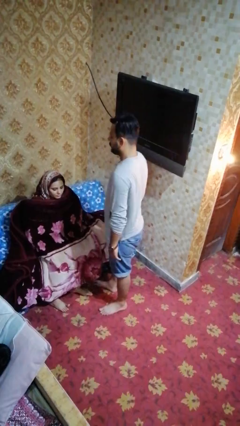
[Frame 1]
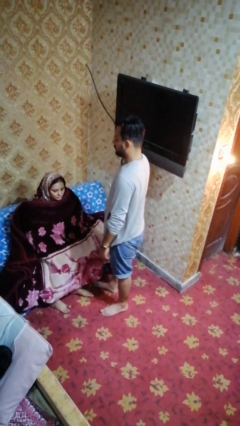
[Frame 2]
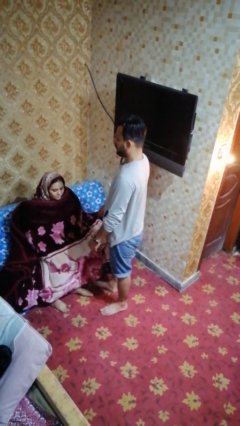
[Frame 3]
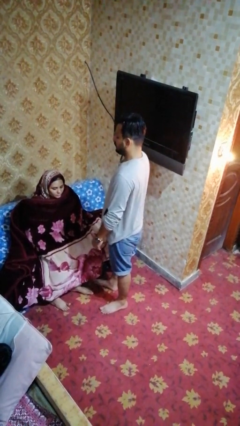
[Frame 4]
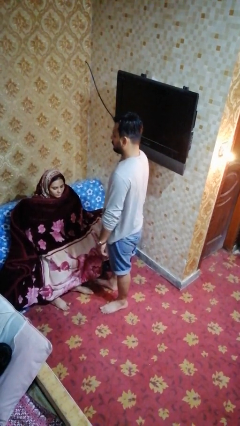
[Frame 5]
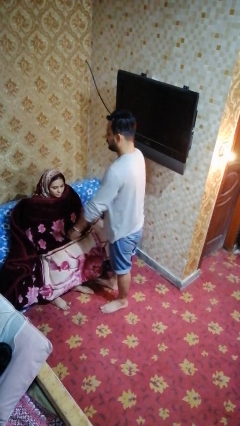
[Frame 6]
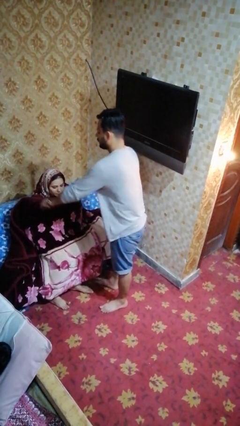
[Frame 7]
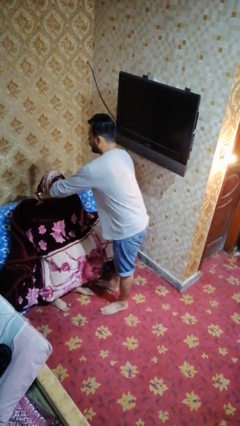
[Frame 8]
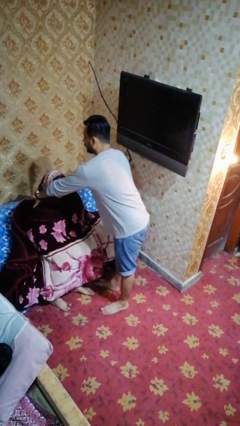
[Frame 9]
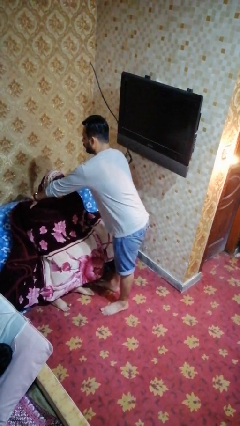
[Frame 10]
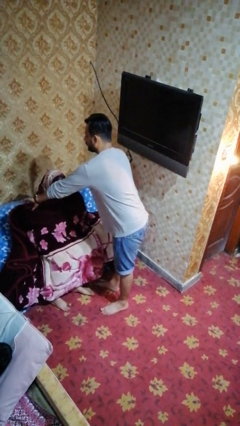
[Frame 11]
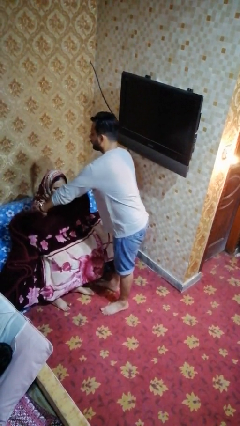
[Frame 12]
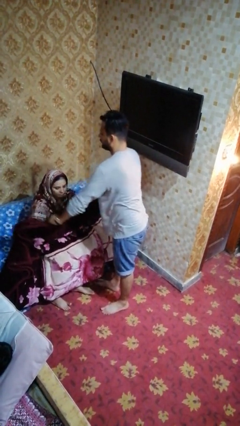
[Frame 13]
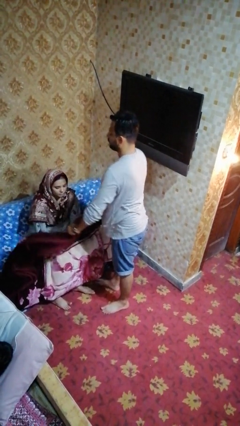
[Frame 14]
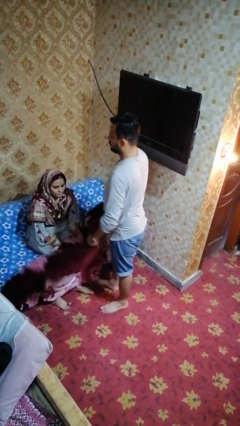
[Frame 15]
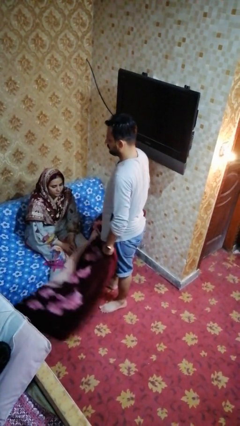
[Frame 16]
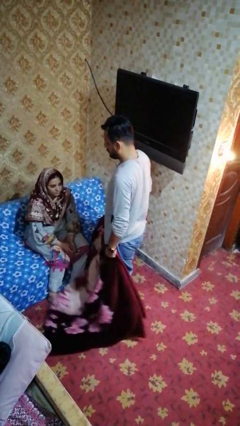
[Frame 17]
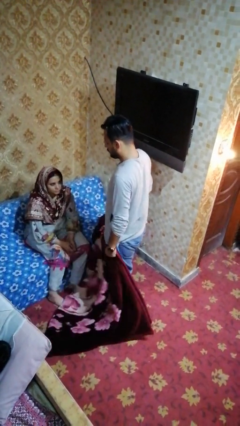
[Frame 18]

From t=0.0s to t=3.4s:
person uncovers friend with blanket

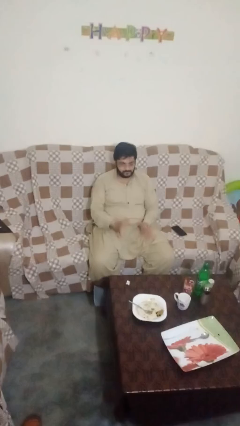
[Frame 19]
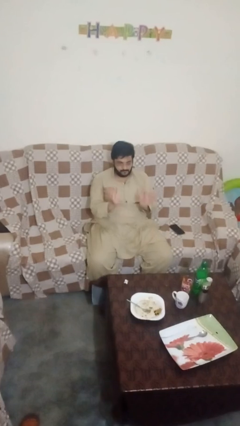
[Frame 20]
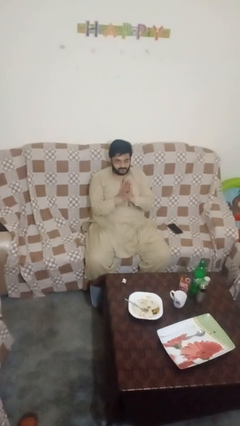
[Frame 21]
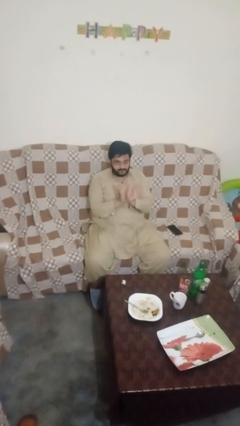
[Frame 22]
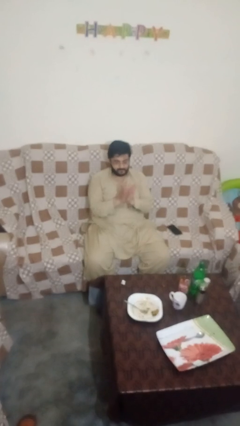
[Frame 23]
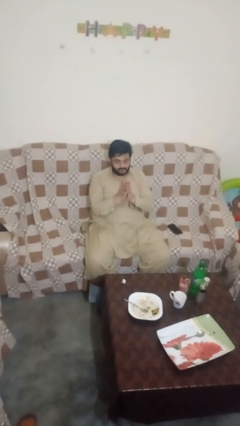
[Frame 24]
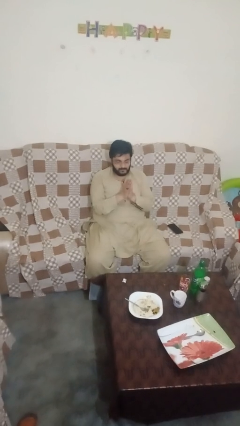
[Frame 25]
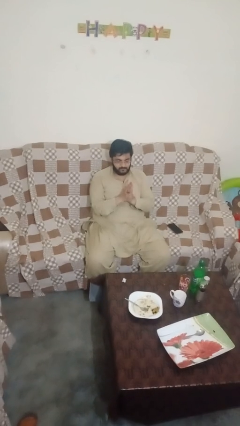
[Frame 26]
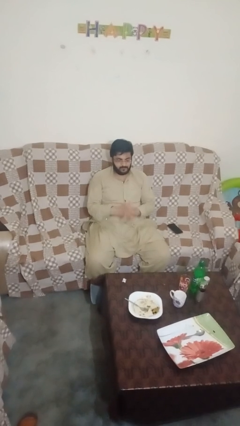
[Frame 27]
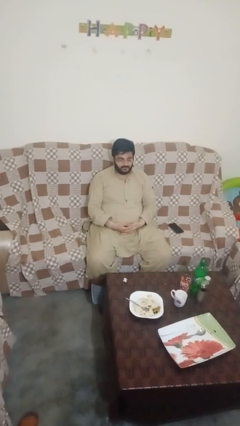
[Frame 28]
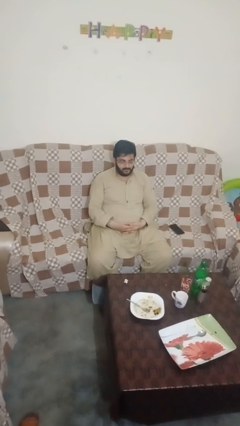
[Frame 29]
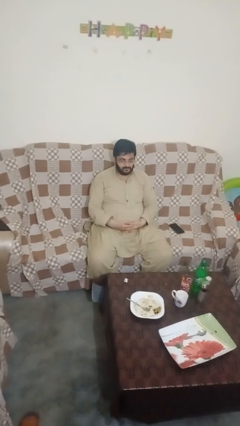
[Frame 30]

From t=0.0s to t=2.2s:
person claps hands

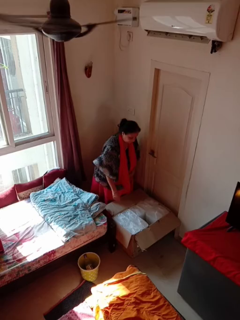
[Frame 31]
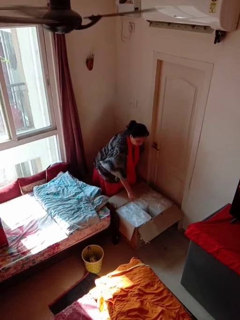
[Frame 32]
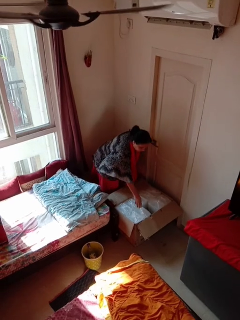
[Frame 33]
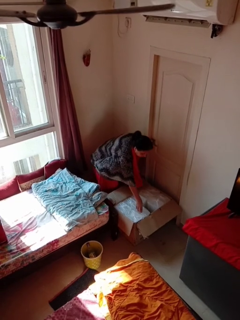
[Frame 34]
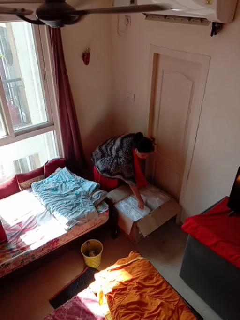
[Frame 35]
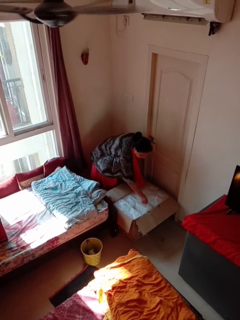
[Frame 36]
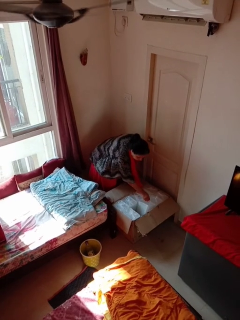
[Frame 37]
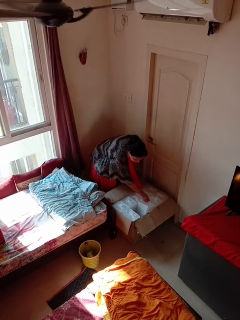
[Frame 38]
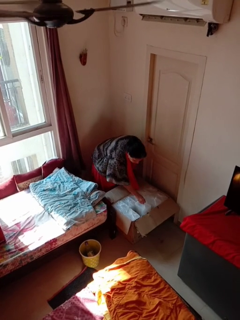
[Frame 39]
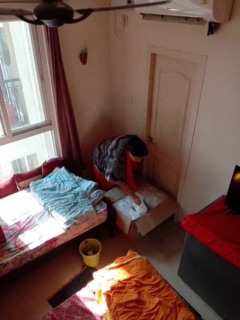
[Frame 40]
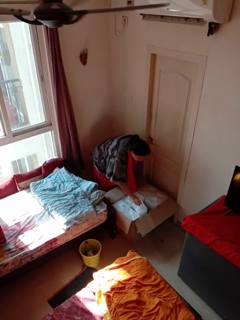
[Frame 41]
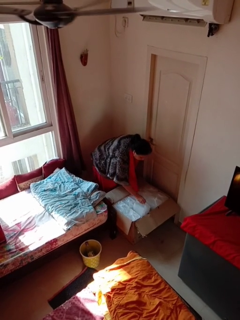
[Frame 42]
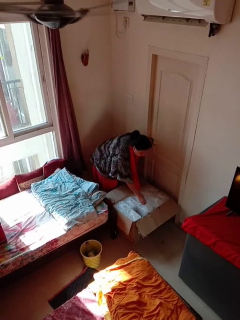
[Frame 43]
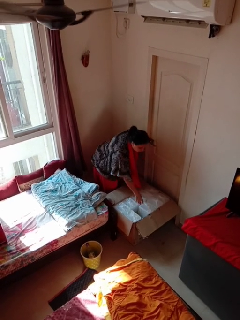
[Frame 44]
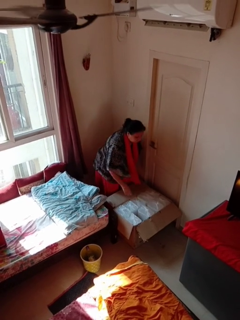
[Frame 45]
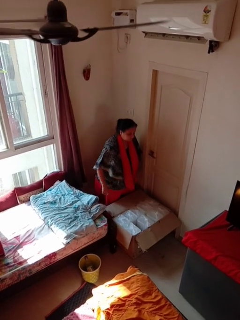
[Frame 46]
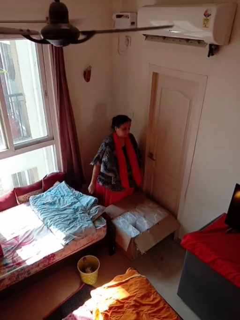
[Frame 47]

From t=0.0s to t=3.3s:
person searches in box

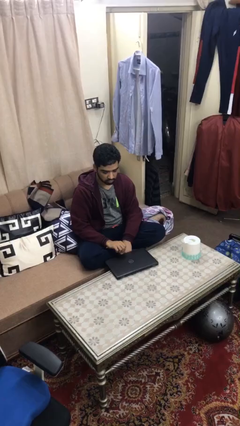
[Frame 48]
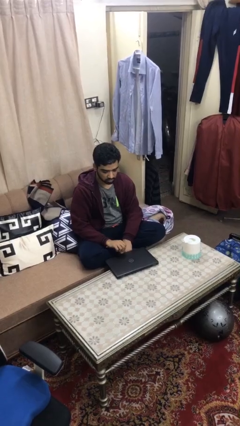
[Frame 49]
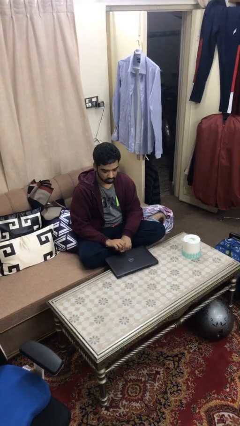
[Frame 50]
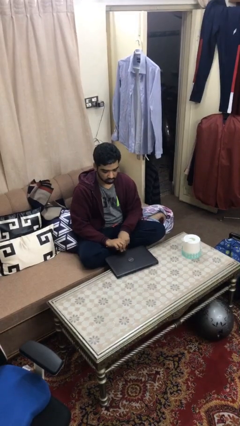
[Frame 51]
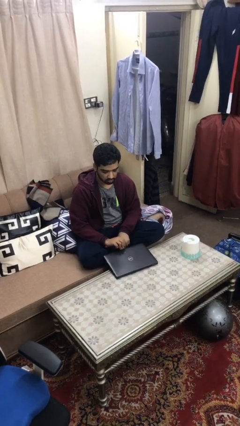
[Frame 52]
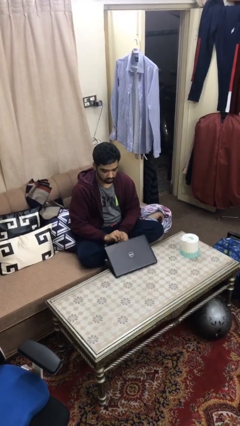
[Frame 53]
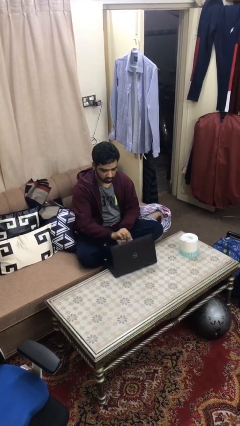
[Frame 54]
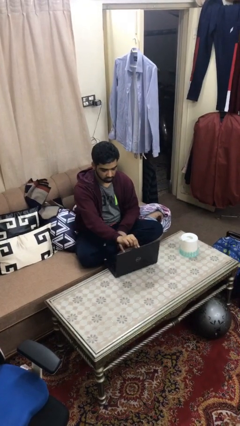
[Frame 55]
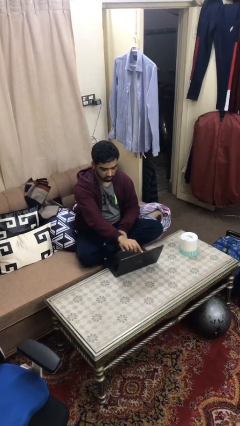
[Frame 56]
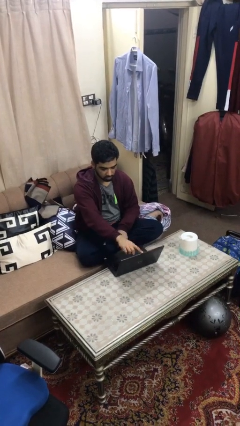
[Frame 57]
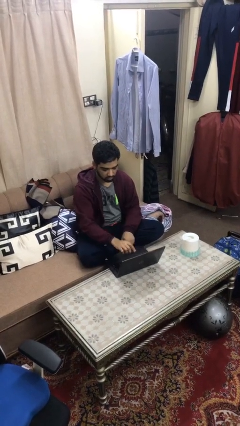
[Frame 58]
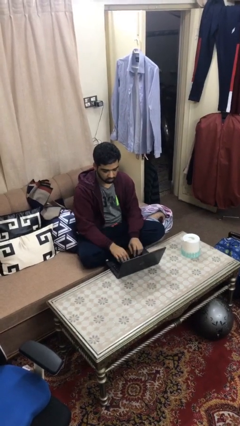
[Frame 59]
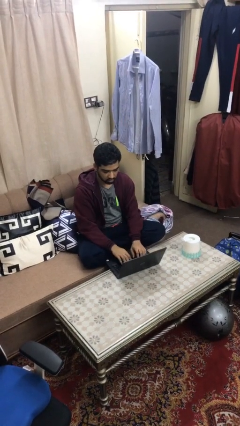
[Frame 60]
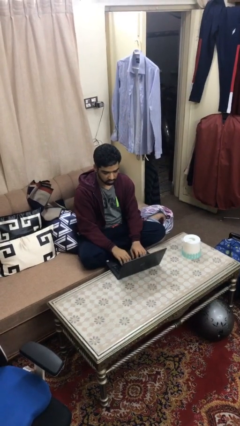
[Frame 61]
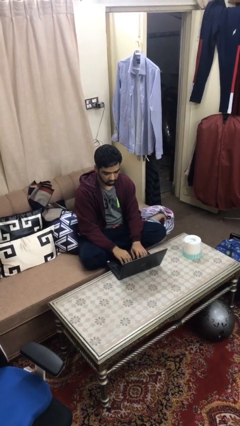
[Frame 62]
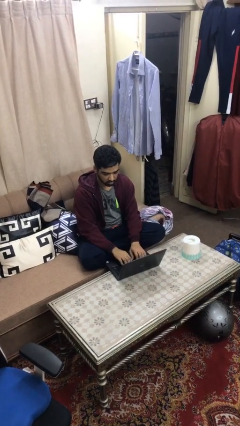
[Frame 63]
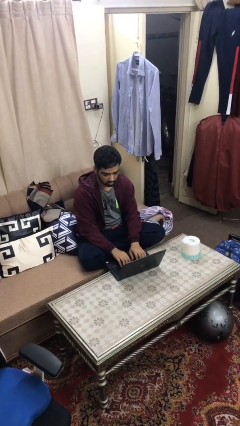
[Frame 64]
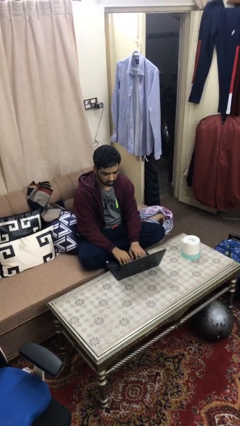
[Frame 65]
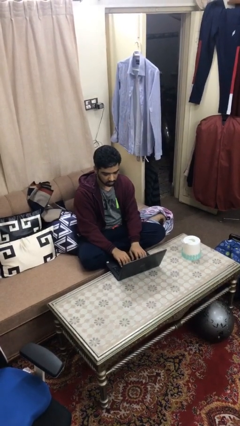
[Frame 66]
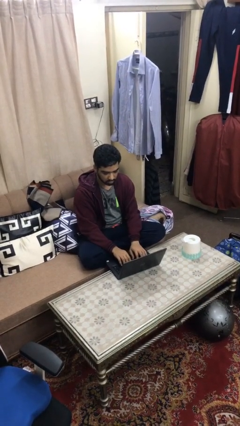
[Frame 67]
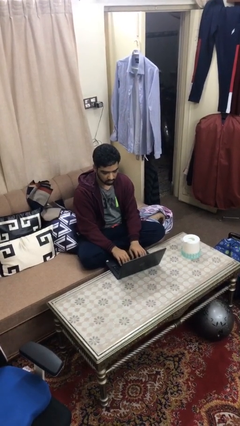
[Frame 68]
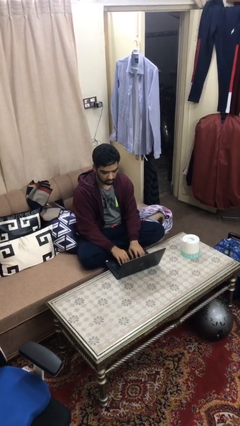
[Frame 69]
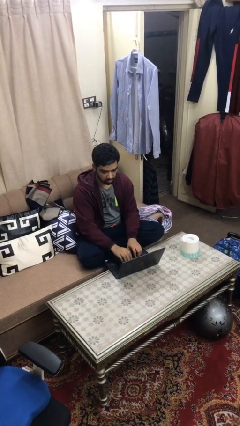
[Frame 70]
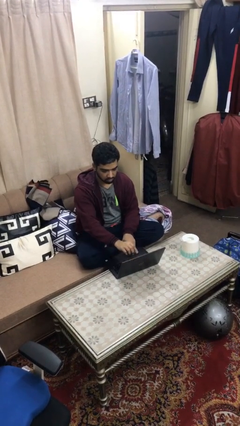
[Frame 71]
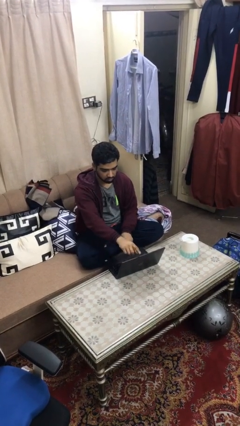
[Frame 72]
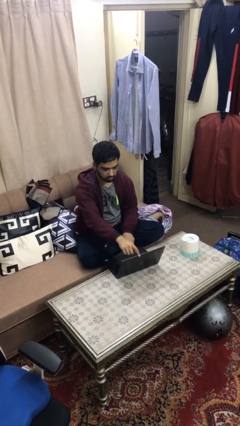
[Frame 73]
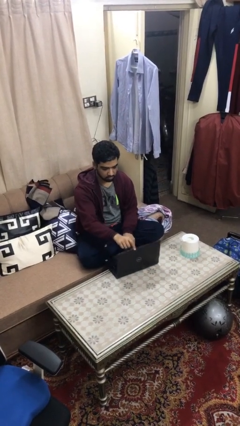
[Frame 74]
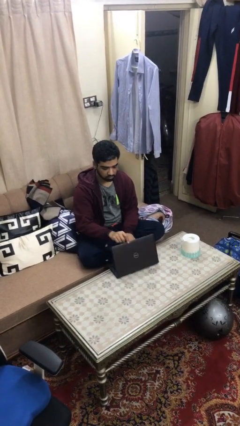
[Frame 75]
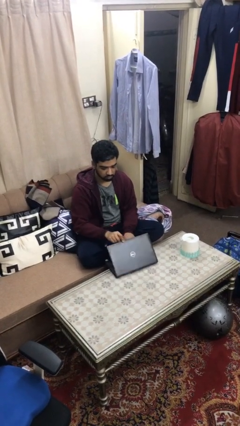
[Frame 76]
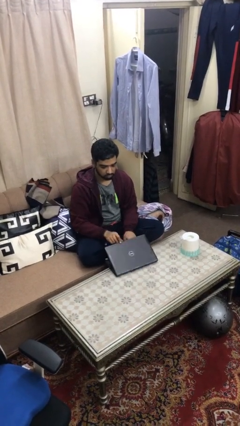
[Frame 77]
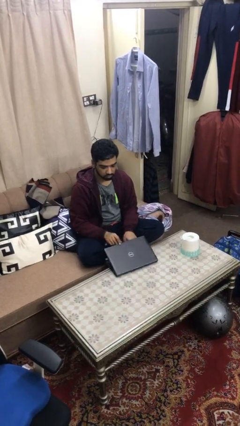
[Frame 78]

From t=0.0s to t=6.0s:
person interacts with laptop

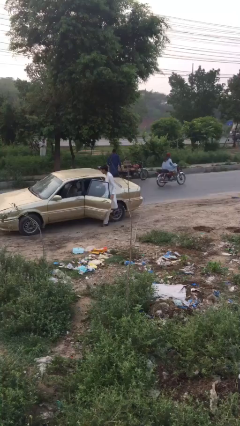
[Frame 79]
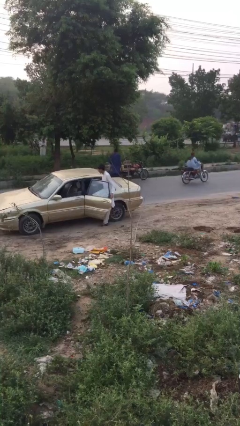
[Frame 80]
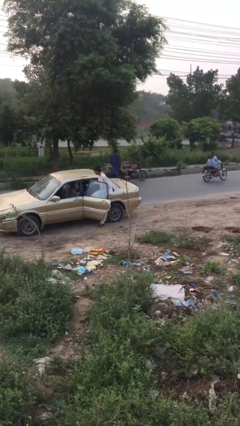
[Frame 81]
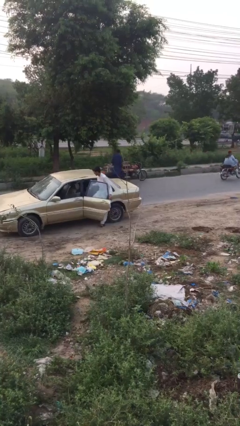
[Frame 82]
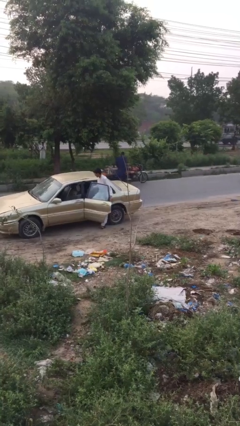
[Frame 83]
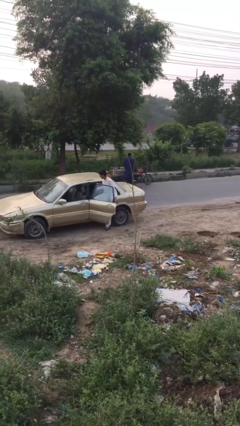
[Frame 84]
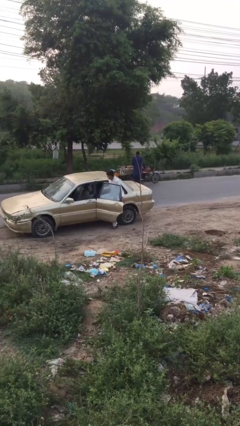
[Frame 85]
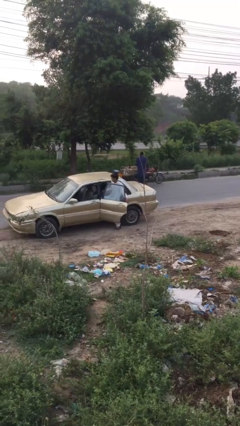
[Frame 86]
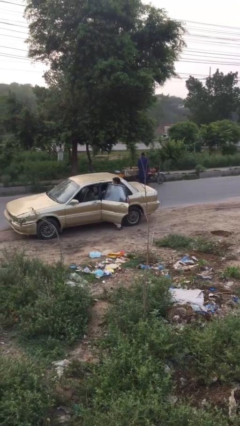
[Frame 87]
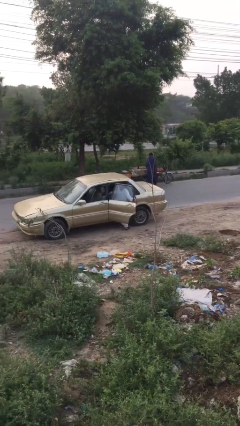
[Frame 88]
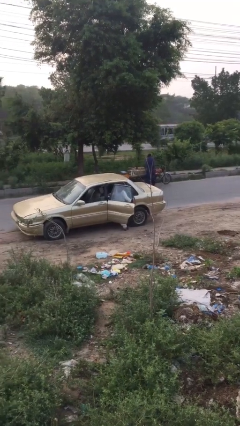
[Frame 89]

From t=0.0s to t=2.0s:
person enters car

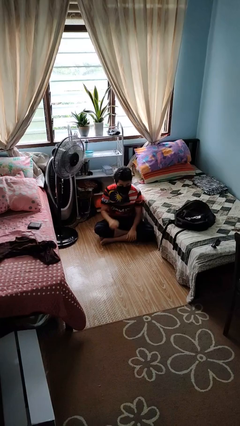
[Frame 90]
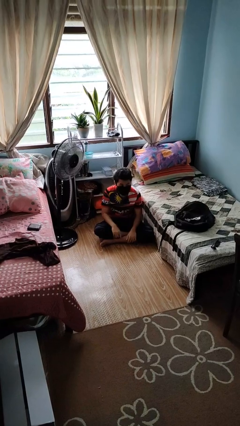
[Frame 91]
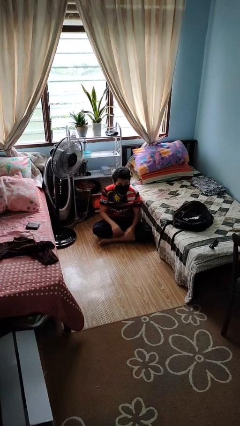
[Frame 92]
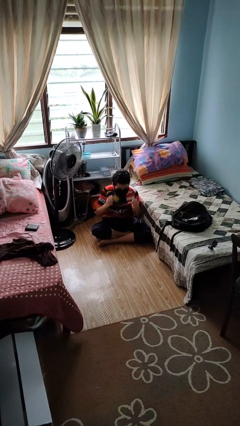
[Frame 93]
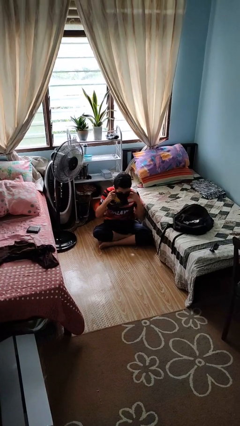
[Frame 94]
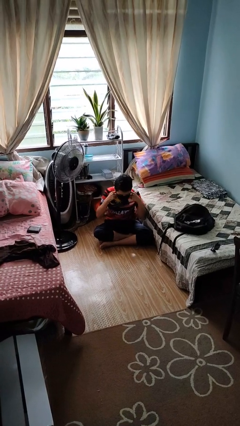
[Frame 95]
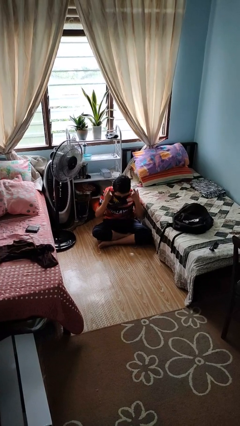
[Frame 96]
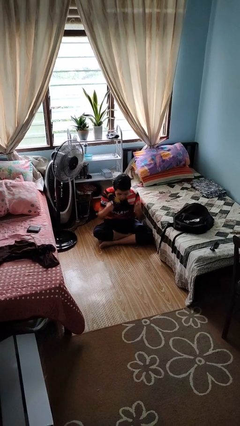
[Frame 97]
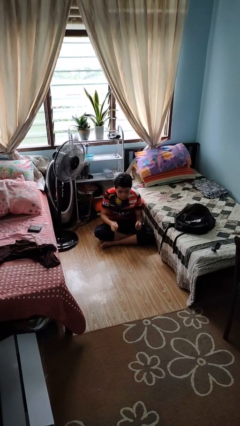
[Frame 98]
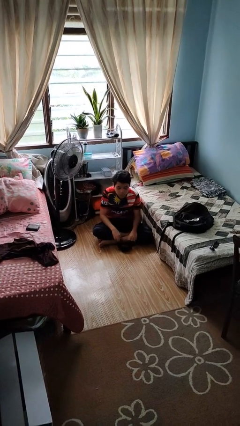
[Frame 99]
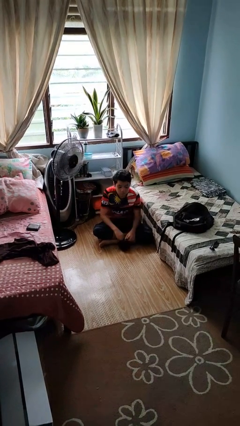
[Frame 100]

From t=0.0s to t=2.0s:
person takes off facemask
